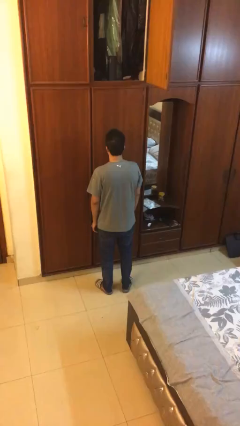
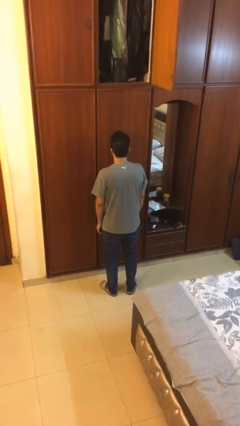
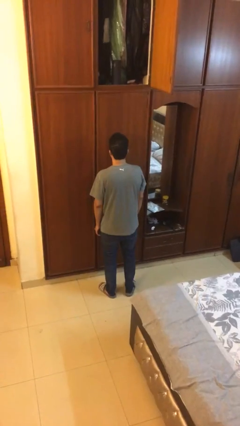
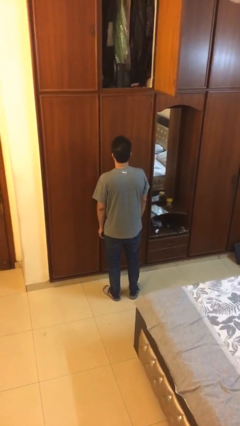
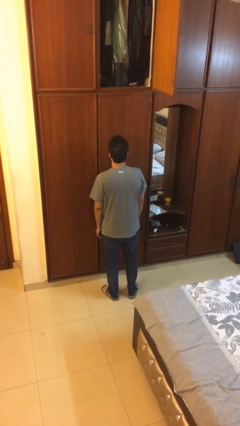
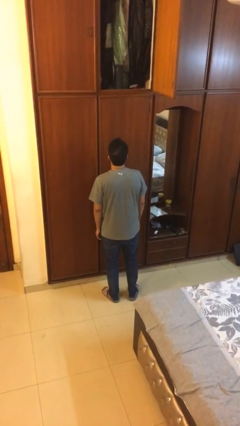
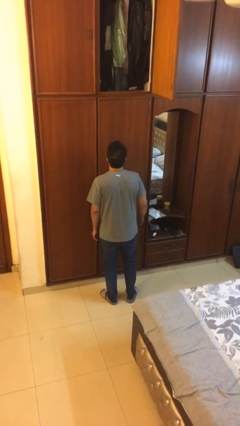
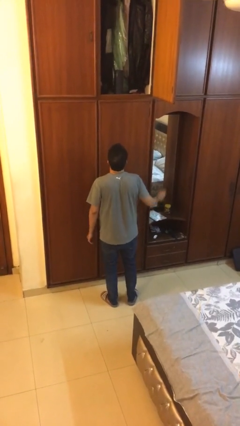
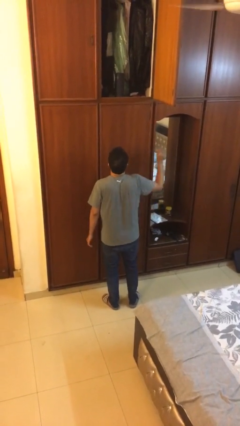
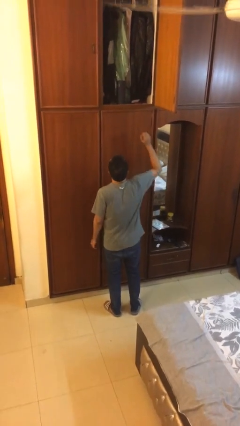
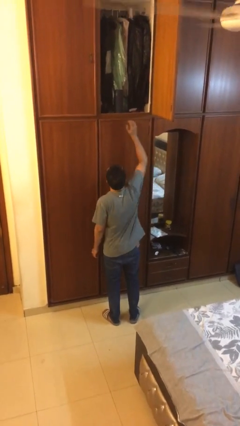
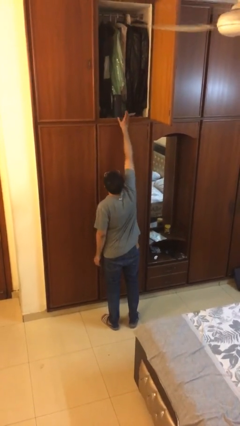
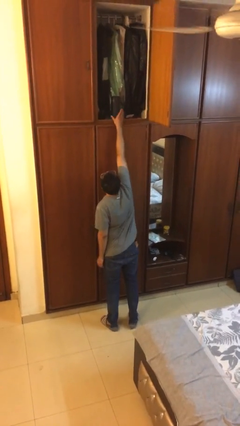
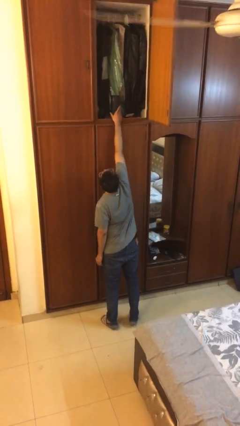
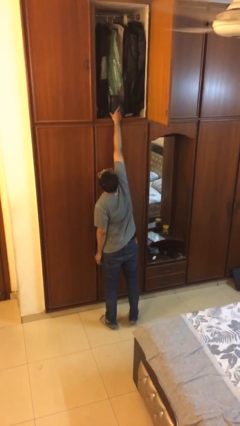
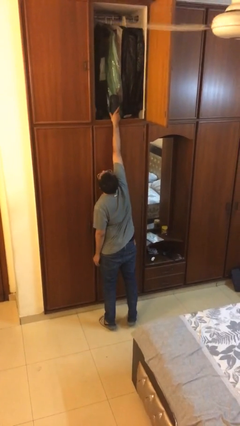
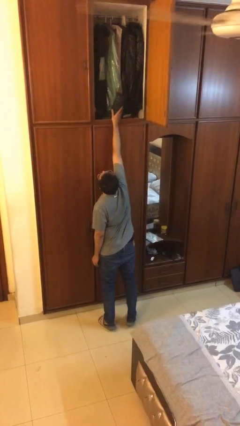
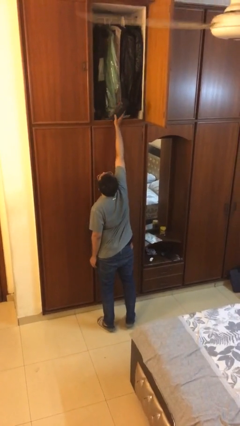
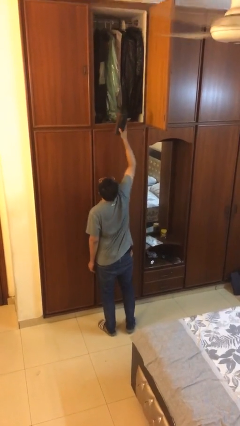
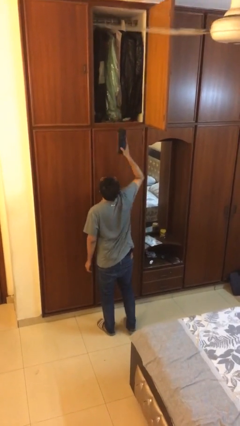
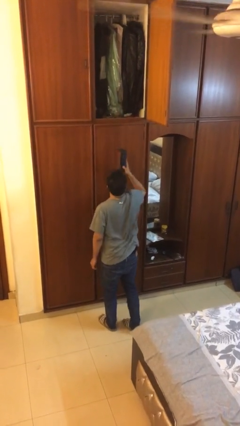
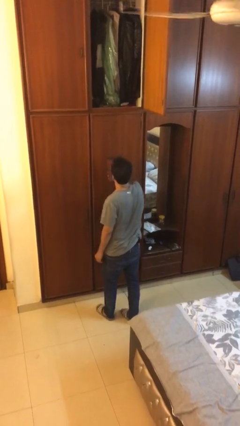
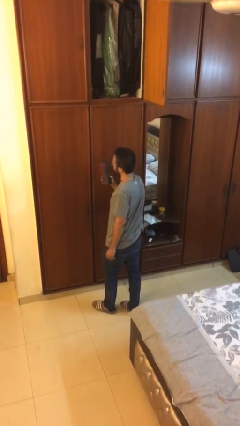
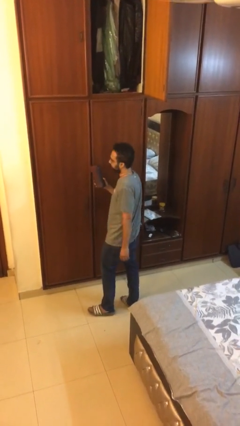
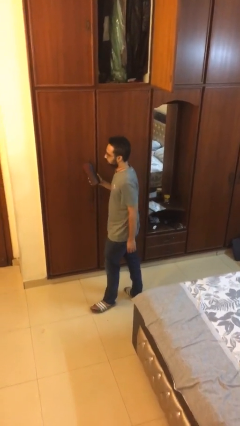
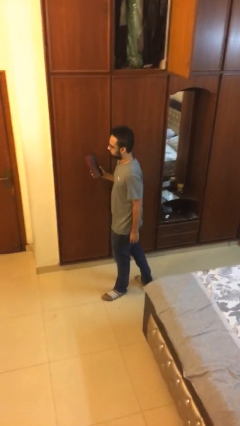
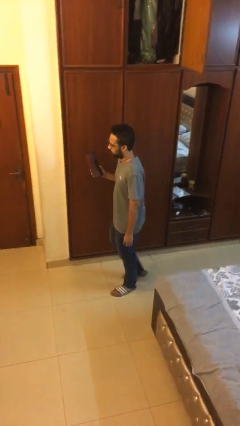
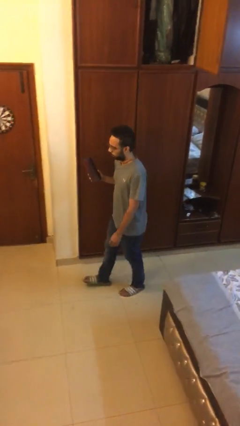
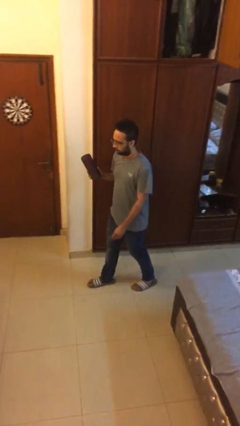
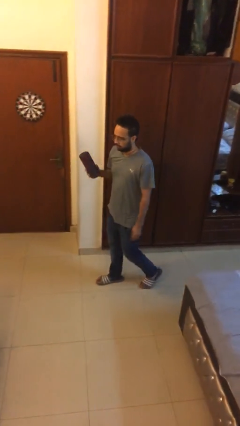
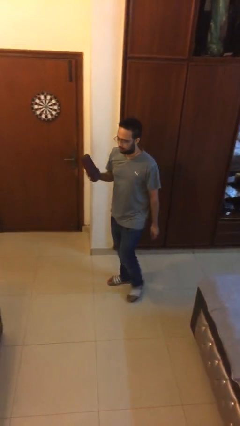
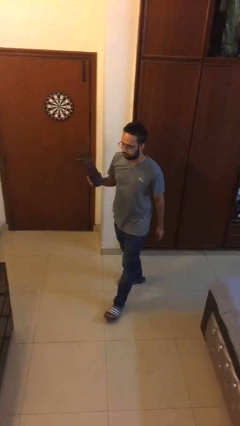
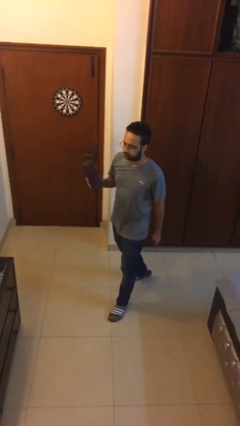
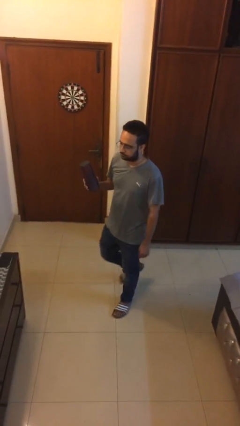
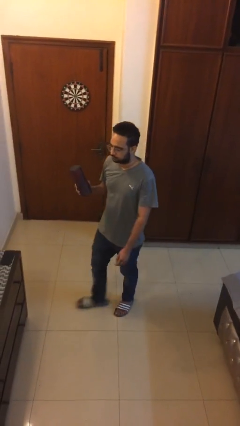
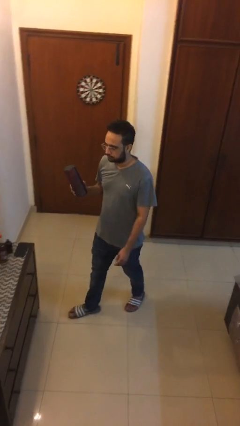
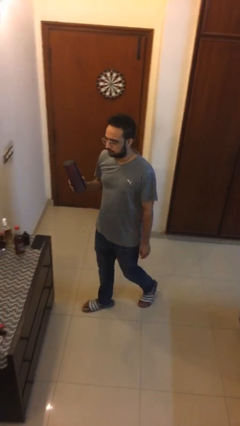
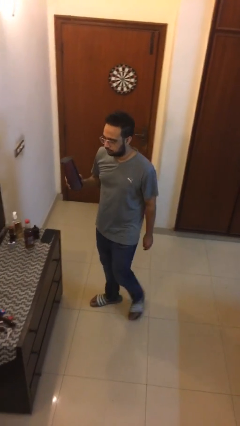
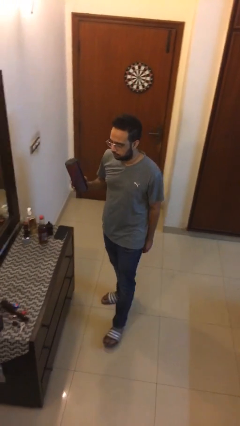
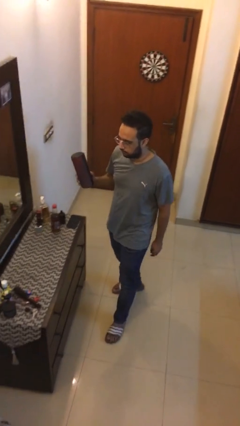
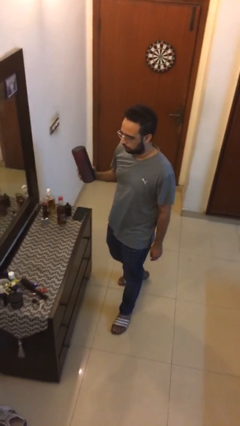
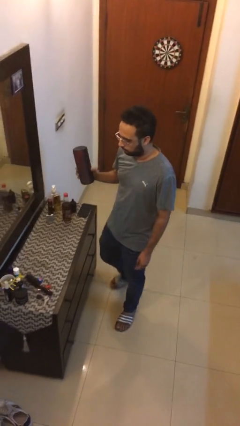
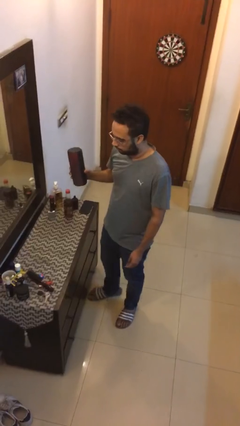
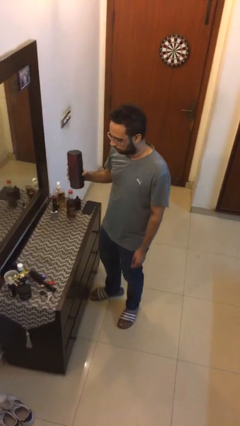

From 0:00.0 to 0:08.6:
person picks up object from shelf

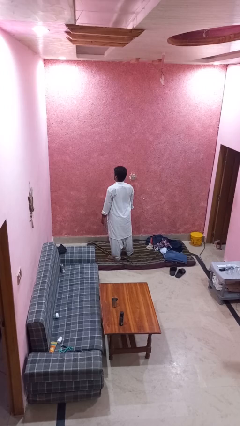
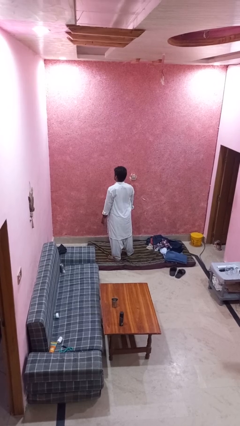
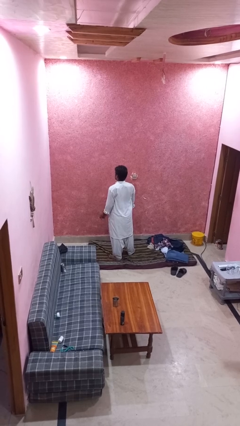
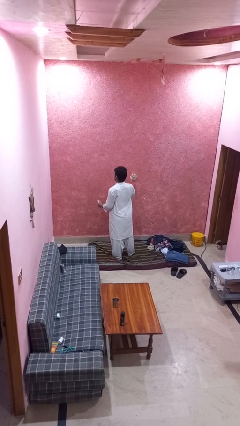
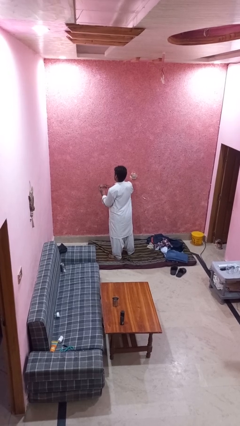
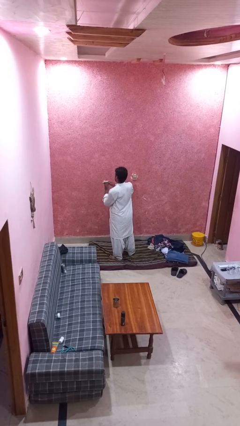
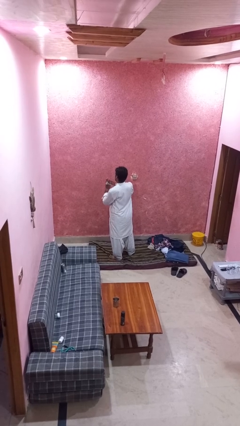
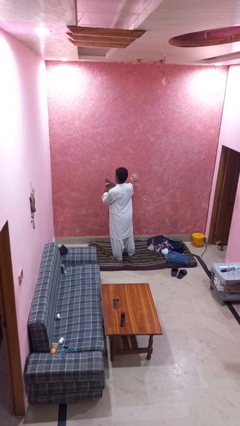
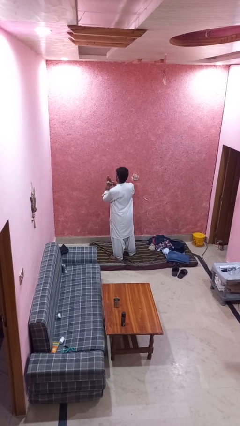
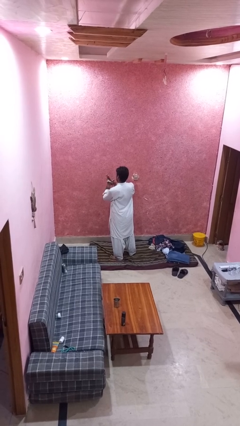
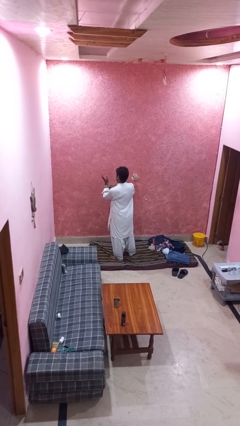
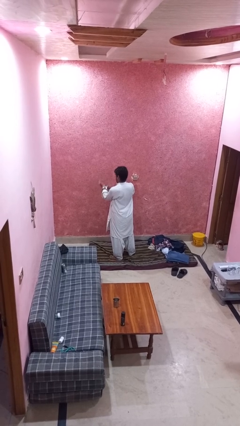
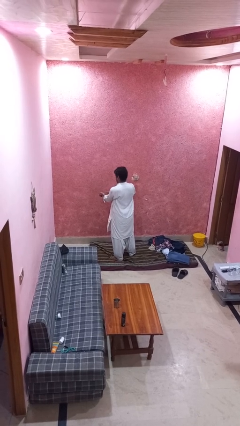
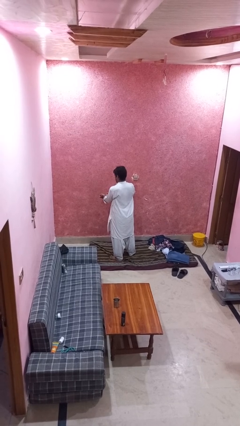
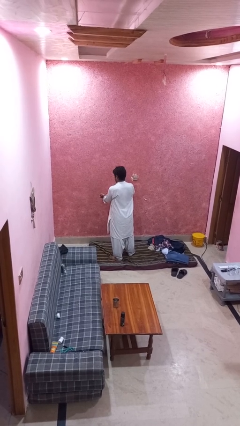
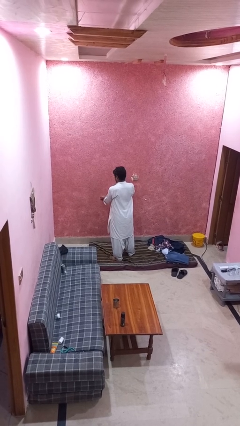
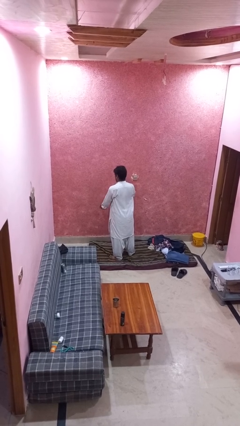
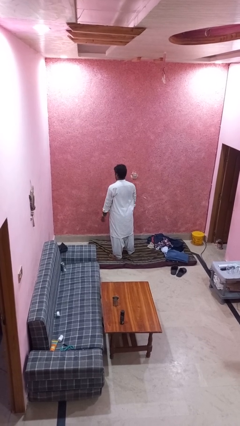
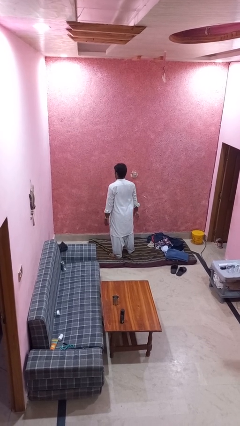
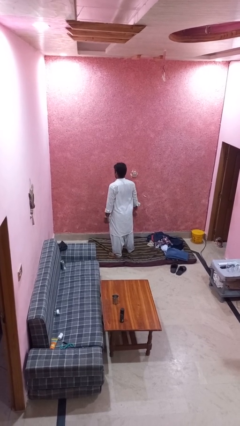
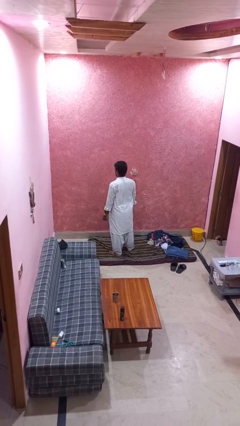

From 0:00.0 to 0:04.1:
person puts on wristwatch

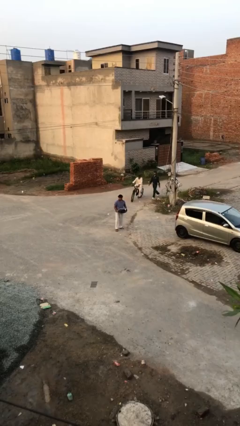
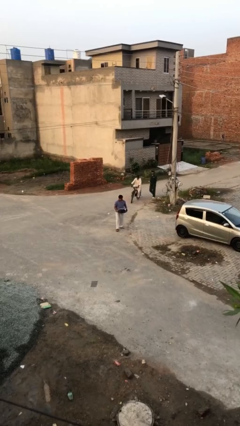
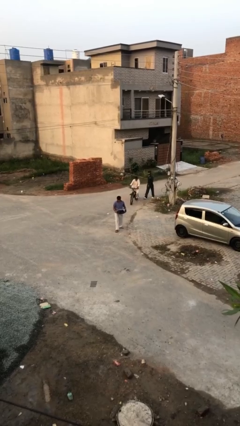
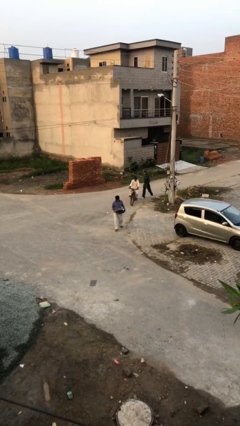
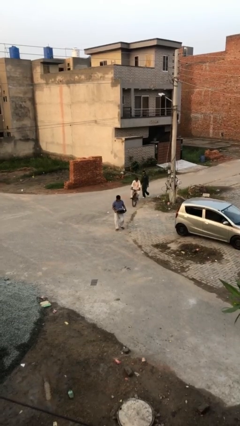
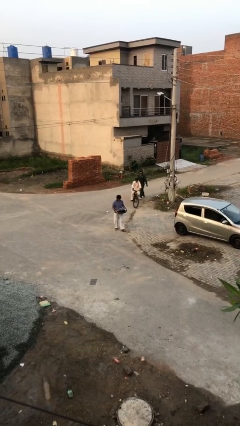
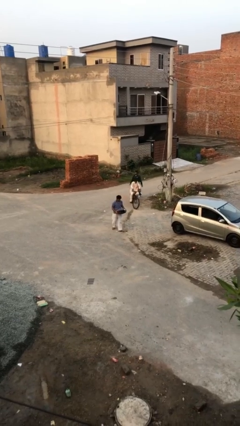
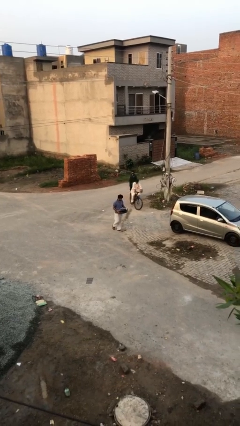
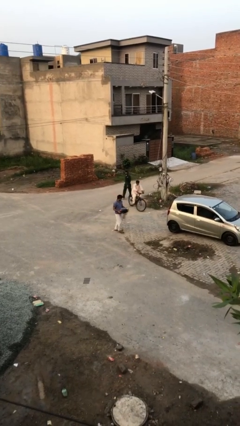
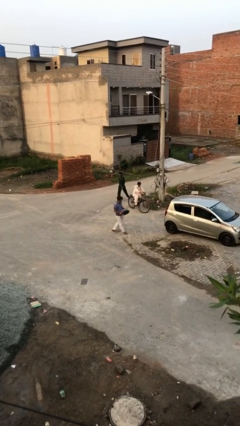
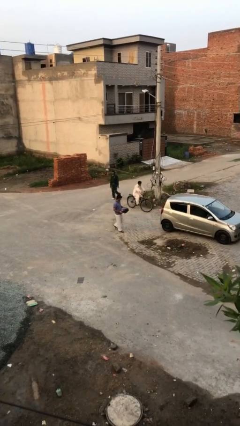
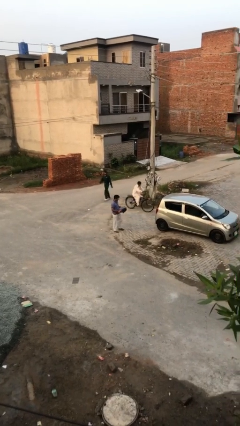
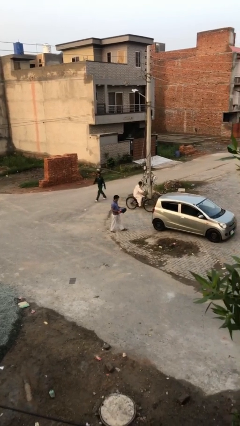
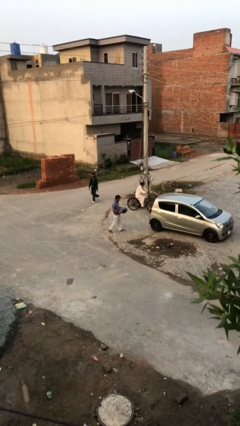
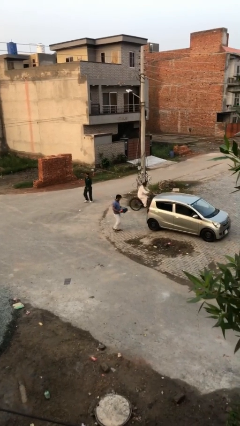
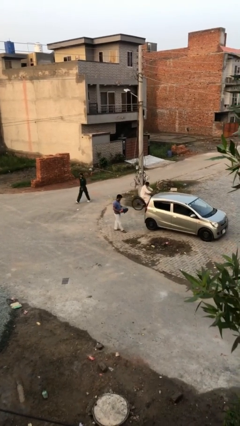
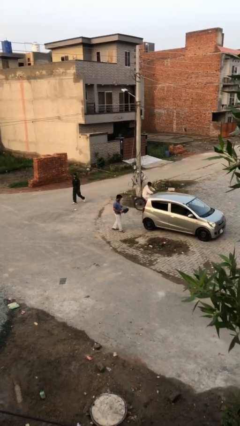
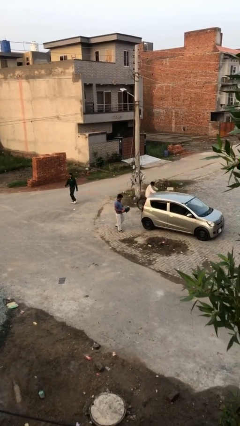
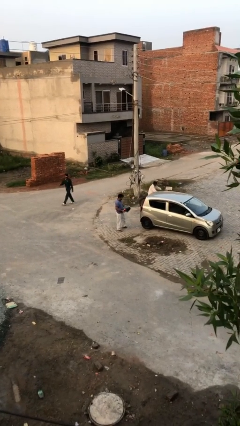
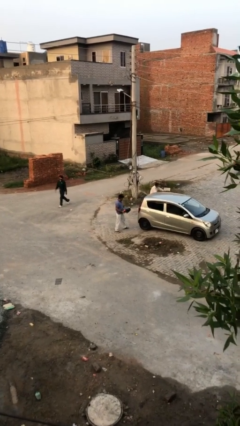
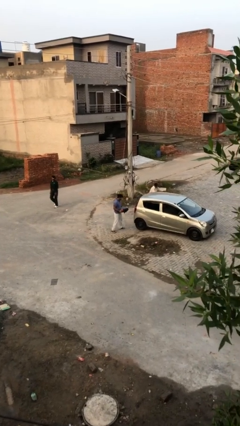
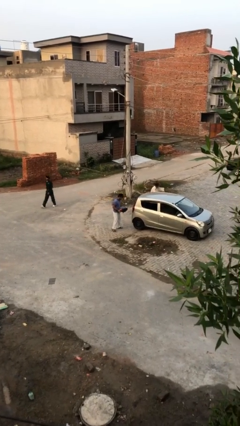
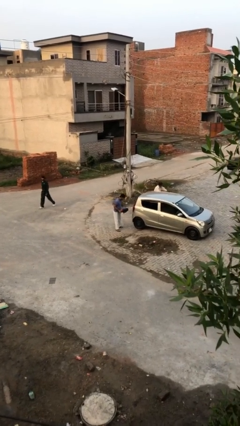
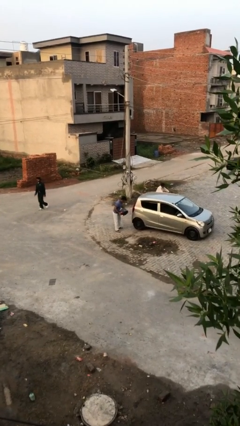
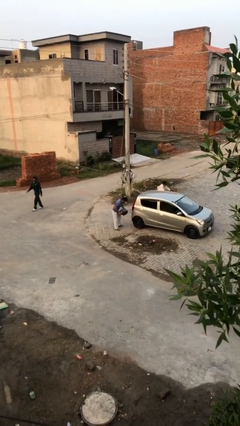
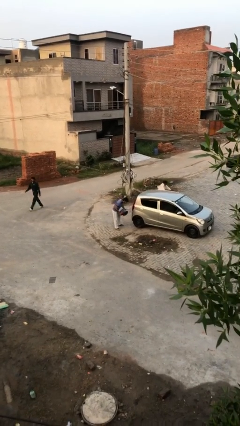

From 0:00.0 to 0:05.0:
person carries heavy object
